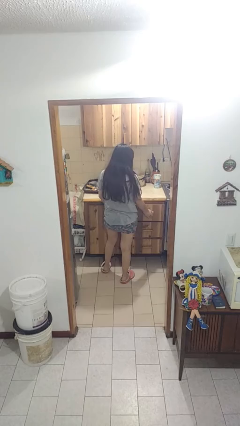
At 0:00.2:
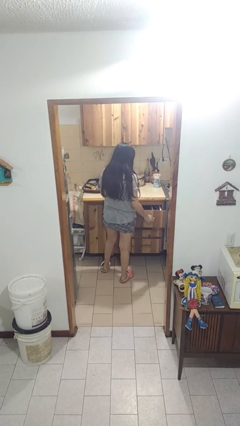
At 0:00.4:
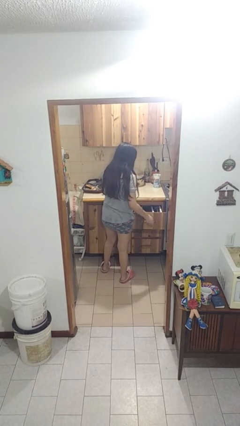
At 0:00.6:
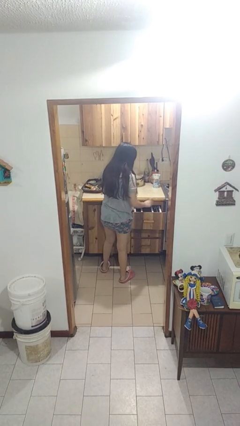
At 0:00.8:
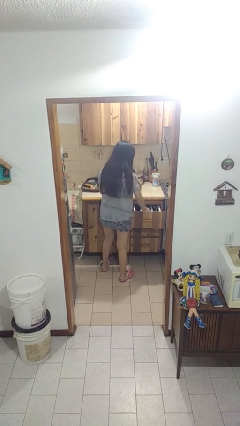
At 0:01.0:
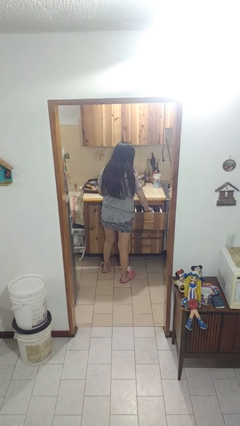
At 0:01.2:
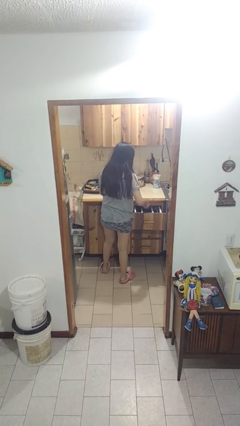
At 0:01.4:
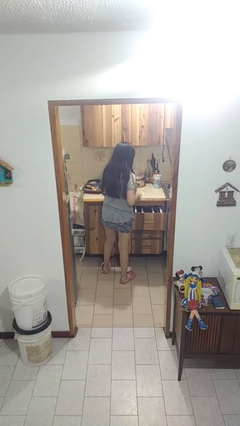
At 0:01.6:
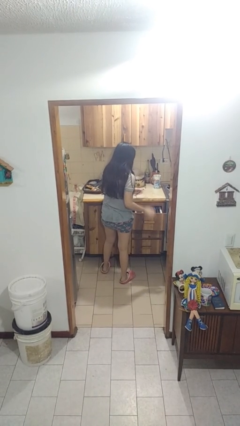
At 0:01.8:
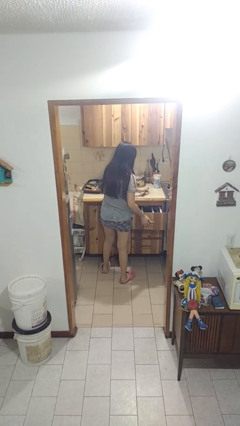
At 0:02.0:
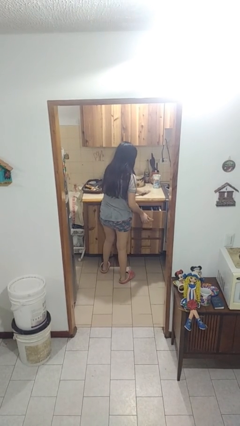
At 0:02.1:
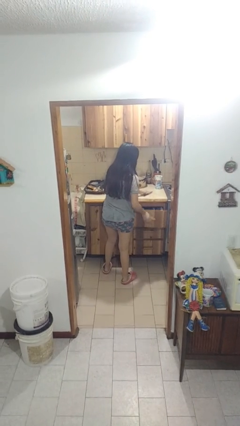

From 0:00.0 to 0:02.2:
person takes object from kitchen drawer

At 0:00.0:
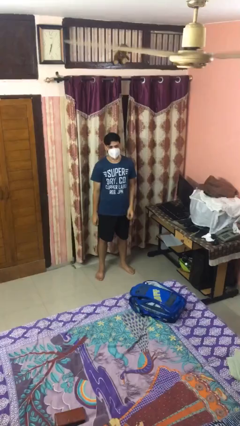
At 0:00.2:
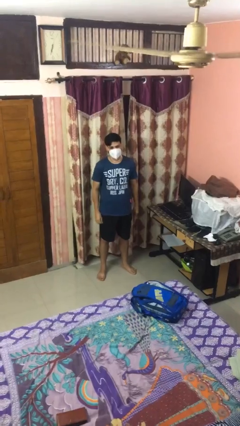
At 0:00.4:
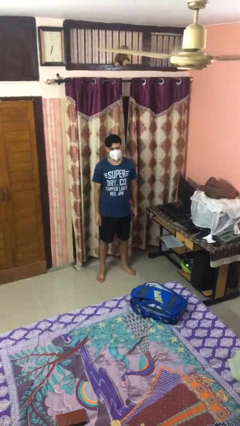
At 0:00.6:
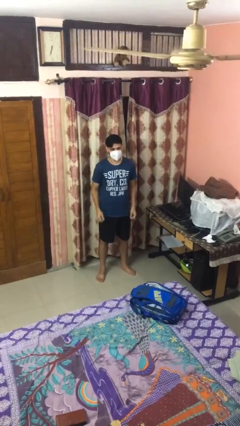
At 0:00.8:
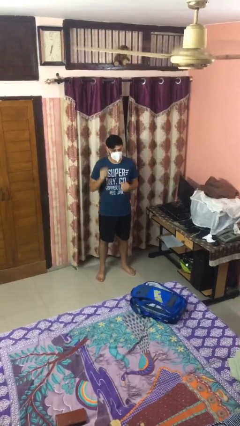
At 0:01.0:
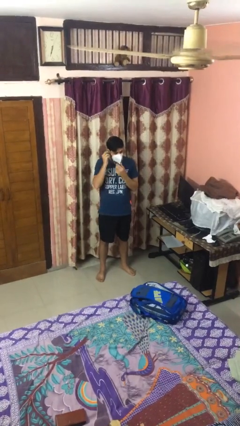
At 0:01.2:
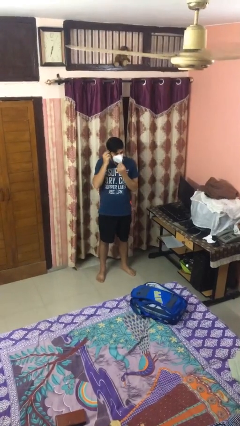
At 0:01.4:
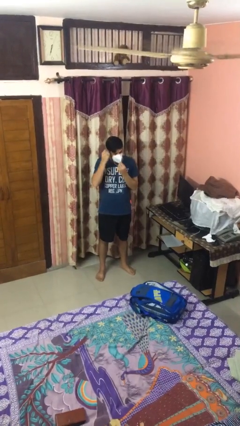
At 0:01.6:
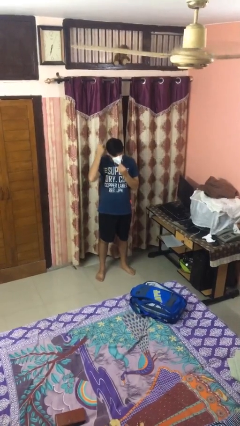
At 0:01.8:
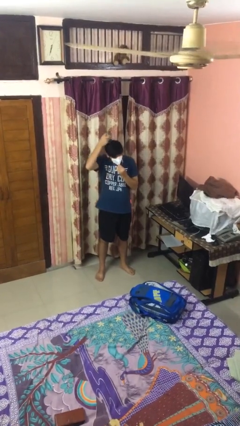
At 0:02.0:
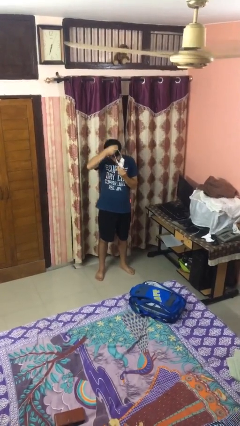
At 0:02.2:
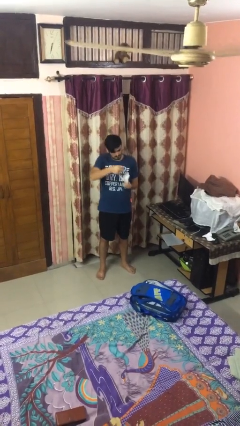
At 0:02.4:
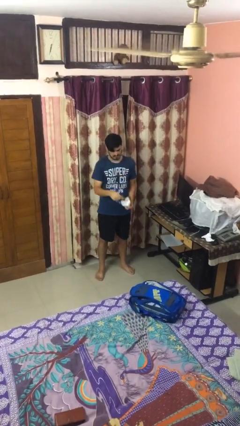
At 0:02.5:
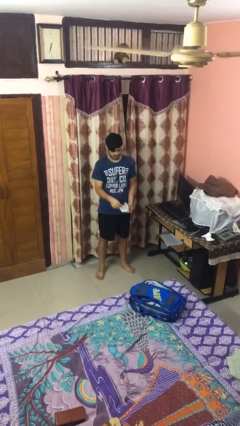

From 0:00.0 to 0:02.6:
person takes off facemask

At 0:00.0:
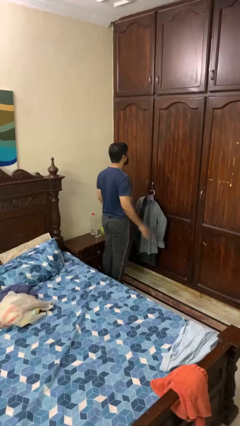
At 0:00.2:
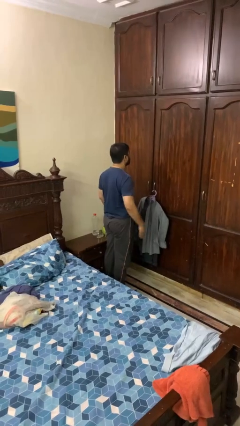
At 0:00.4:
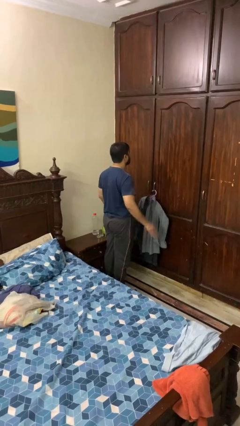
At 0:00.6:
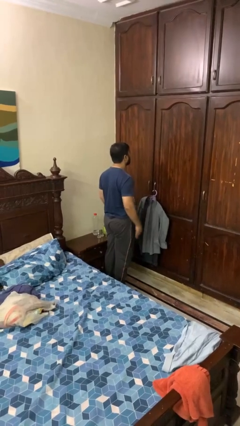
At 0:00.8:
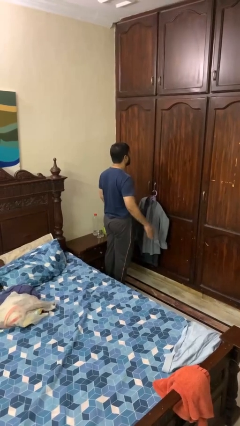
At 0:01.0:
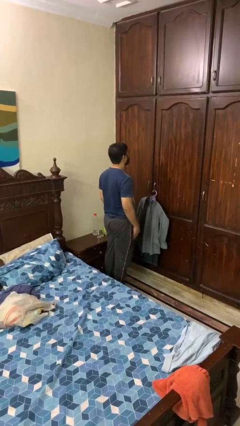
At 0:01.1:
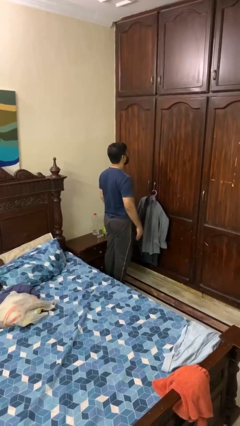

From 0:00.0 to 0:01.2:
person slaps hands on thighs

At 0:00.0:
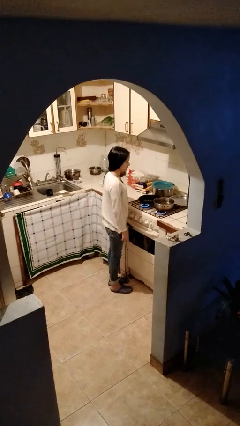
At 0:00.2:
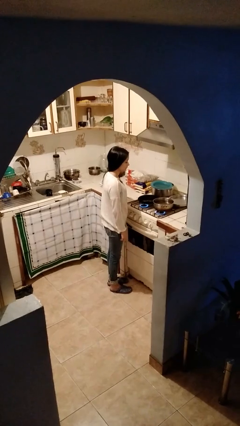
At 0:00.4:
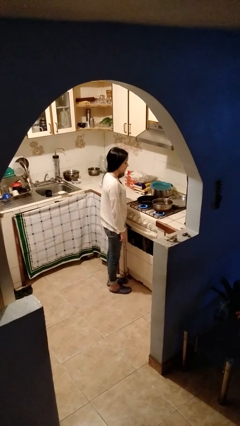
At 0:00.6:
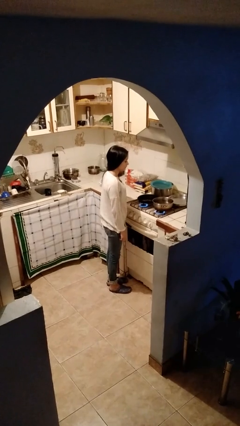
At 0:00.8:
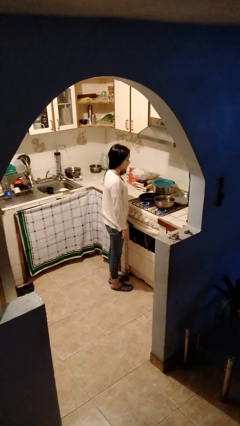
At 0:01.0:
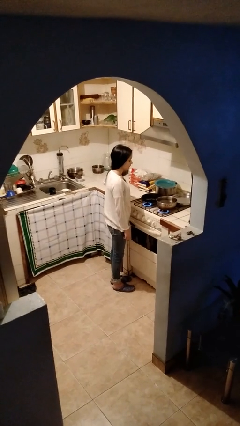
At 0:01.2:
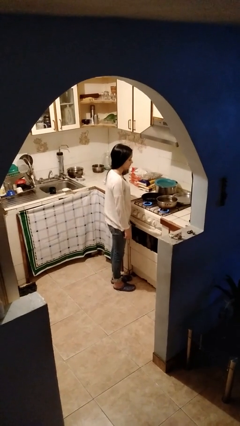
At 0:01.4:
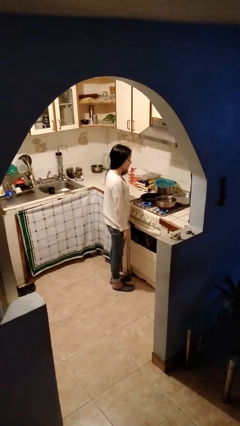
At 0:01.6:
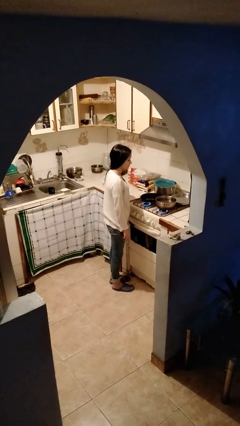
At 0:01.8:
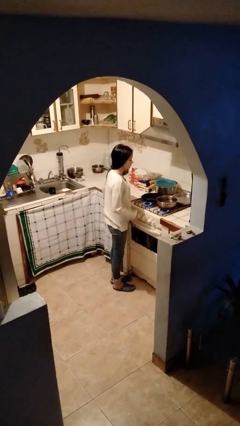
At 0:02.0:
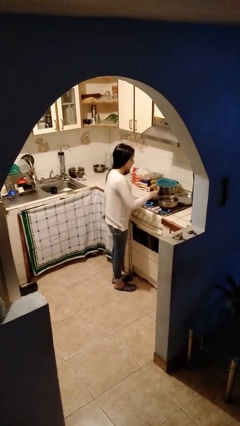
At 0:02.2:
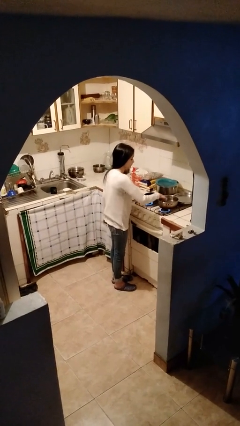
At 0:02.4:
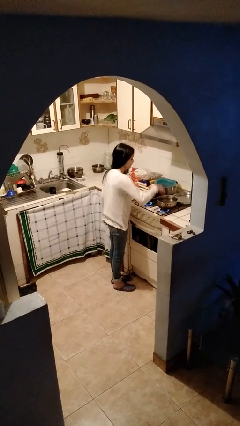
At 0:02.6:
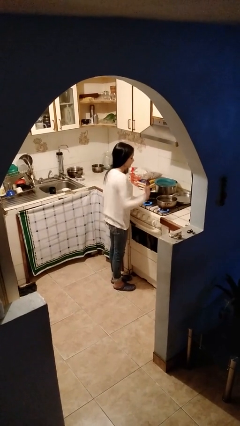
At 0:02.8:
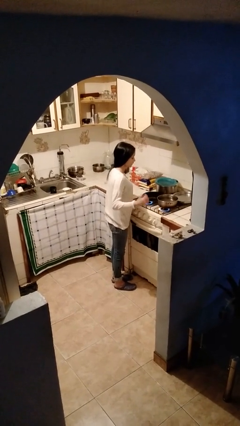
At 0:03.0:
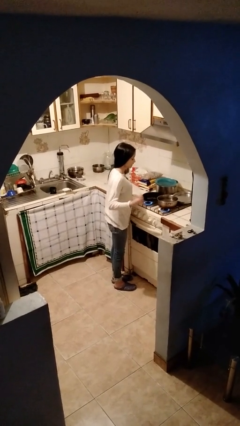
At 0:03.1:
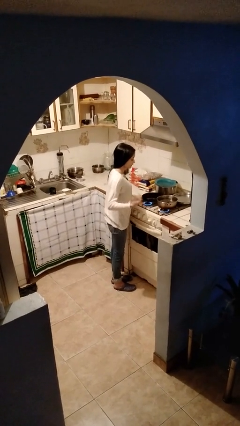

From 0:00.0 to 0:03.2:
person burns hand

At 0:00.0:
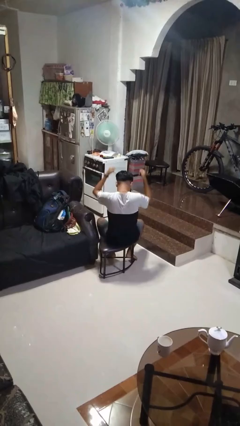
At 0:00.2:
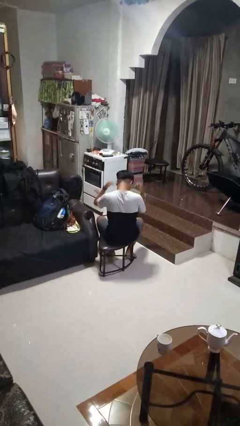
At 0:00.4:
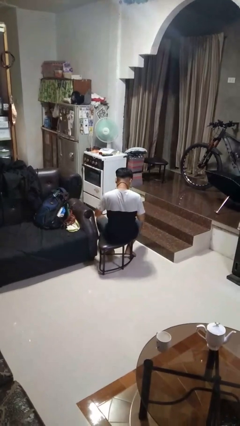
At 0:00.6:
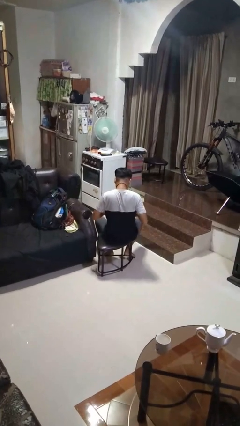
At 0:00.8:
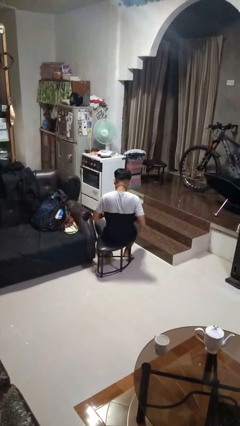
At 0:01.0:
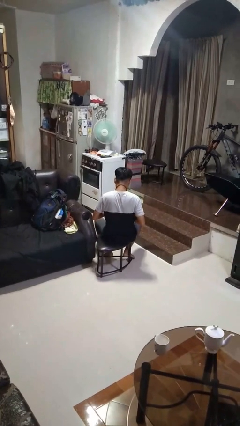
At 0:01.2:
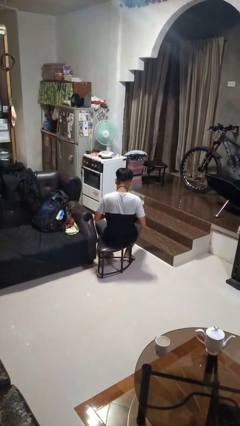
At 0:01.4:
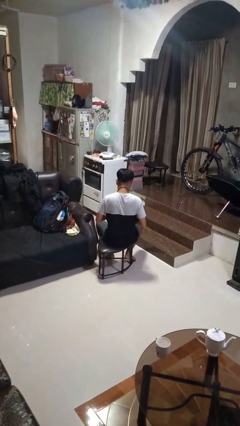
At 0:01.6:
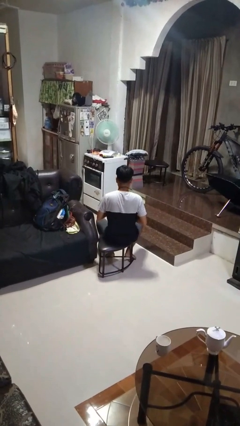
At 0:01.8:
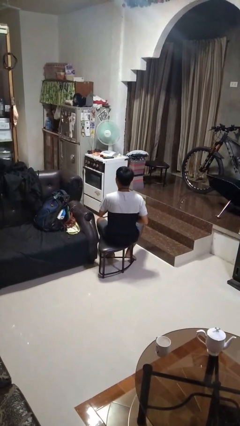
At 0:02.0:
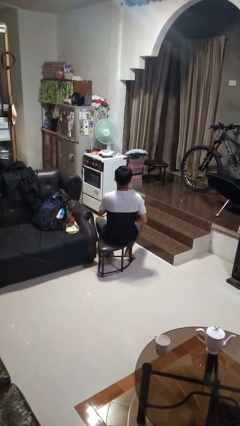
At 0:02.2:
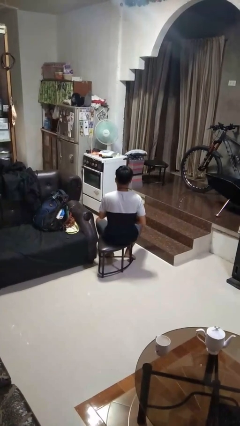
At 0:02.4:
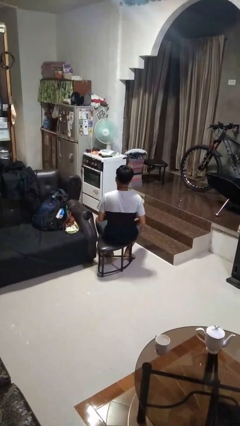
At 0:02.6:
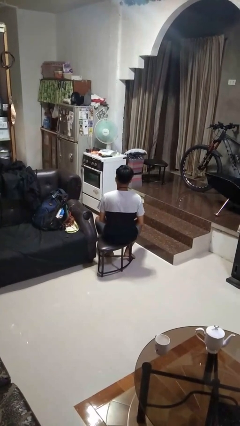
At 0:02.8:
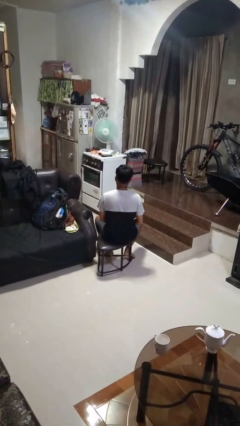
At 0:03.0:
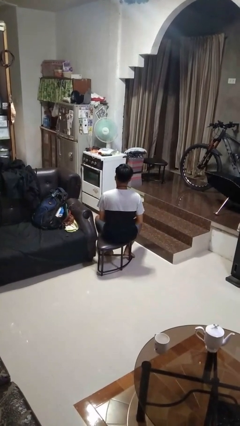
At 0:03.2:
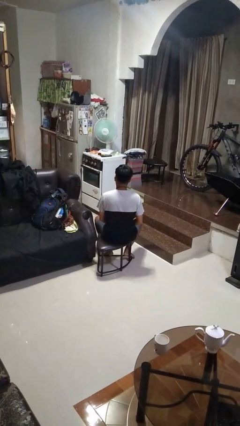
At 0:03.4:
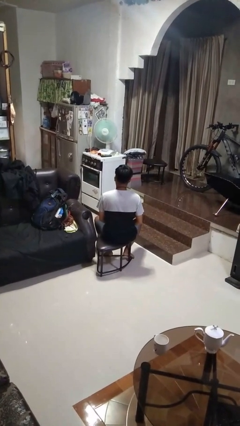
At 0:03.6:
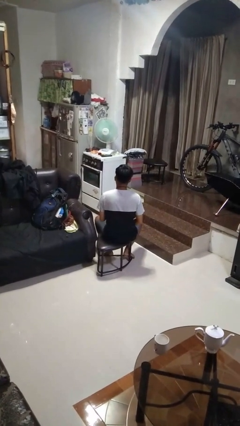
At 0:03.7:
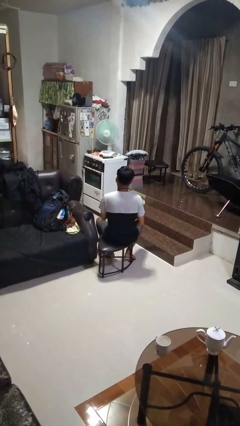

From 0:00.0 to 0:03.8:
person puts on necktie

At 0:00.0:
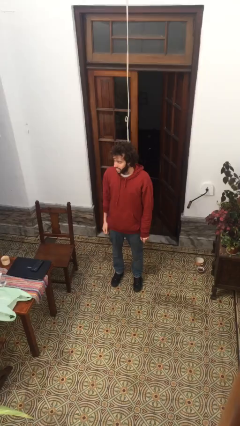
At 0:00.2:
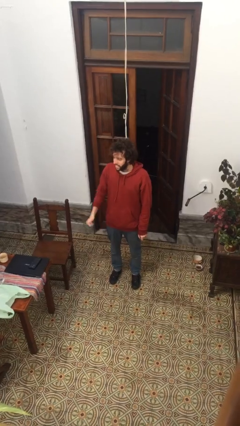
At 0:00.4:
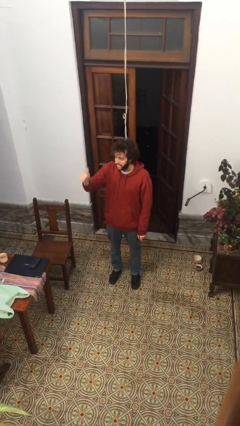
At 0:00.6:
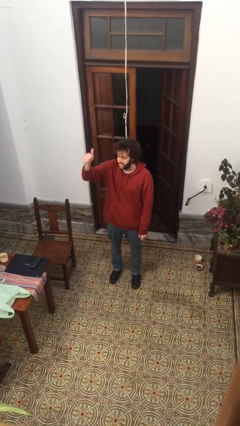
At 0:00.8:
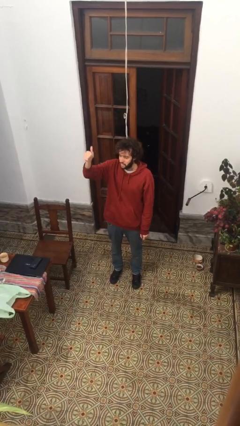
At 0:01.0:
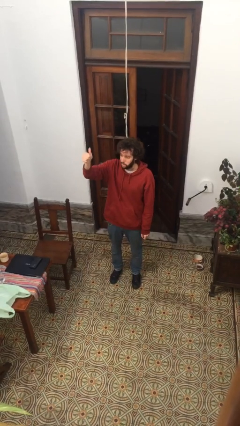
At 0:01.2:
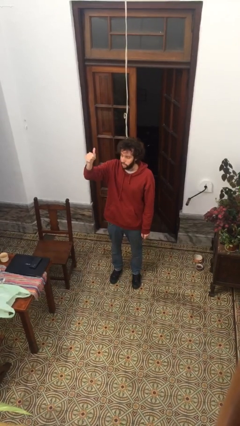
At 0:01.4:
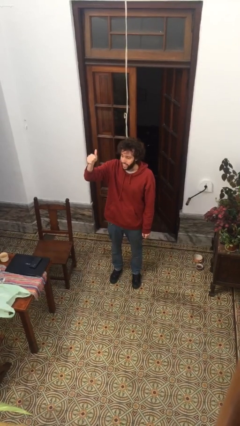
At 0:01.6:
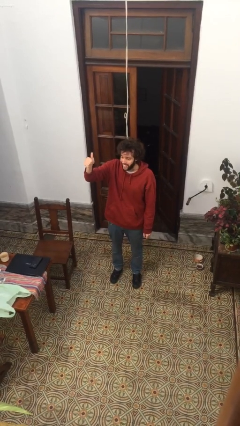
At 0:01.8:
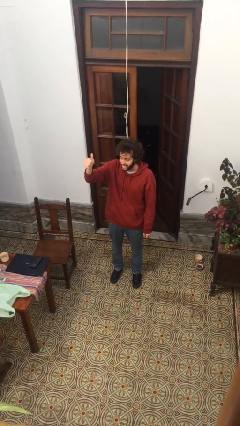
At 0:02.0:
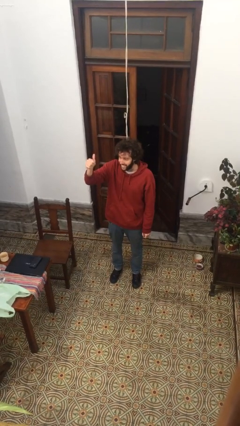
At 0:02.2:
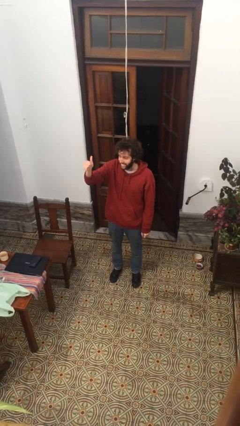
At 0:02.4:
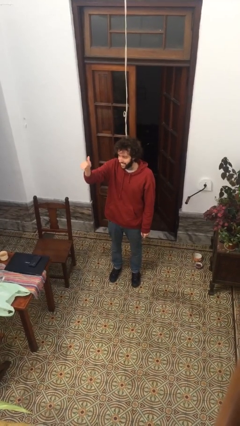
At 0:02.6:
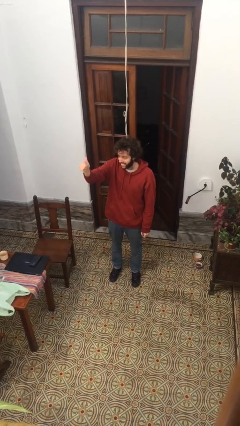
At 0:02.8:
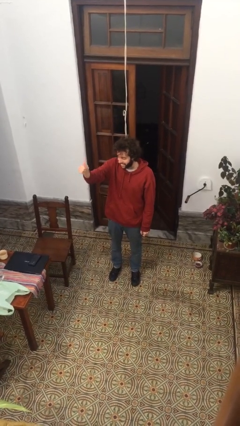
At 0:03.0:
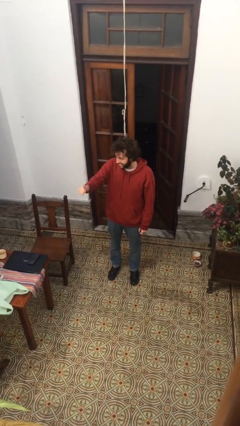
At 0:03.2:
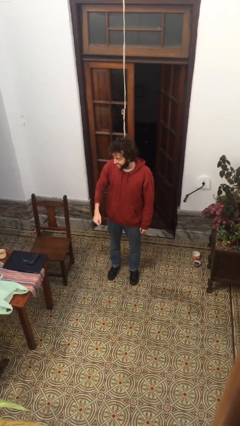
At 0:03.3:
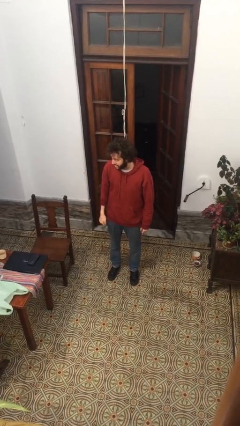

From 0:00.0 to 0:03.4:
person gestures thumbs up

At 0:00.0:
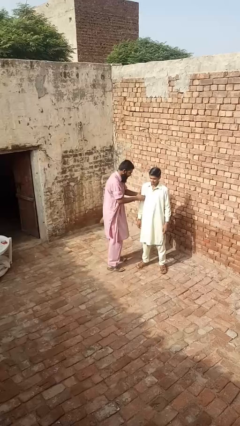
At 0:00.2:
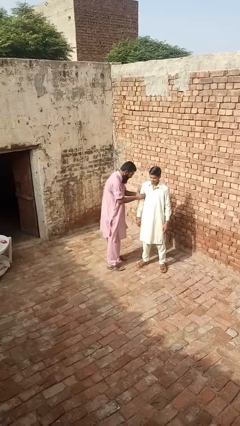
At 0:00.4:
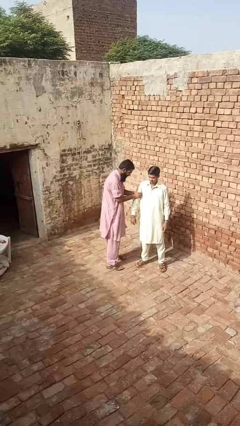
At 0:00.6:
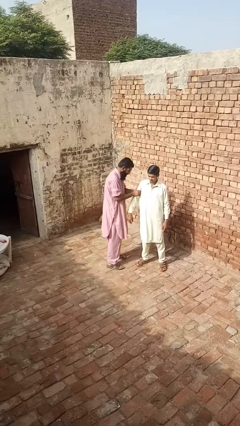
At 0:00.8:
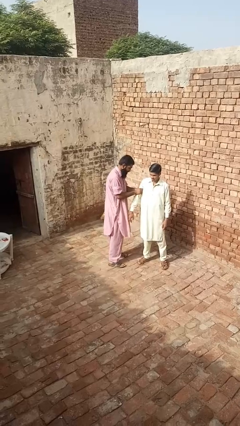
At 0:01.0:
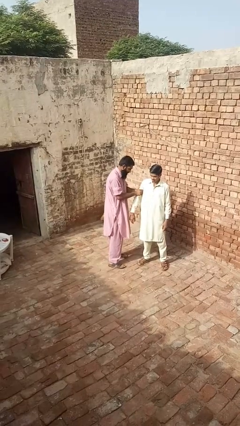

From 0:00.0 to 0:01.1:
person grabs person by bicep
